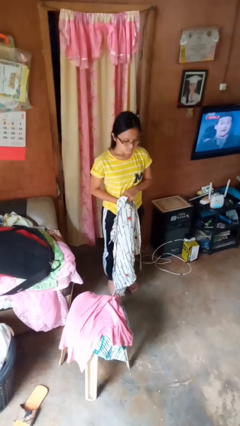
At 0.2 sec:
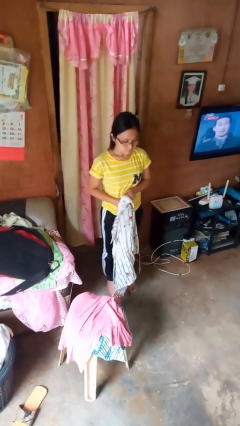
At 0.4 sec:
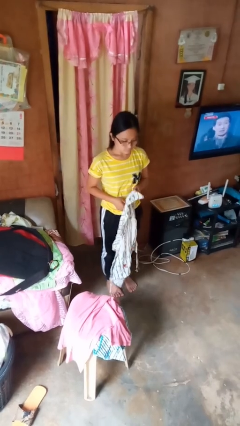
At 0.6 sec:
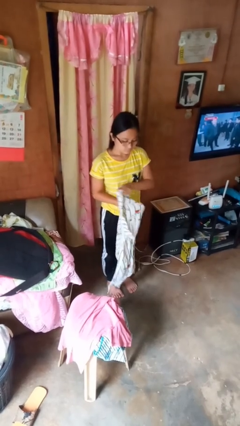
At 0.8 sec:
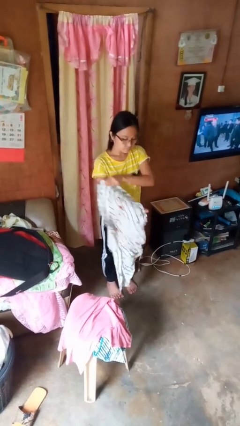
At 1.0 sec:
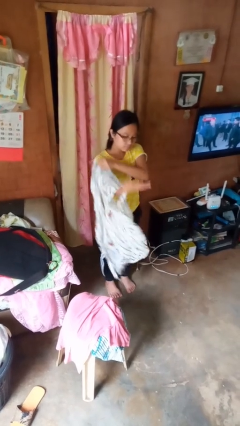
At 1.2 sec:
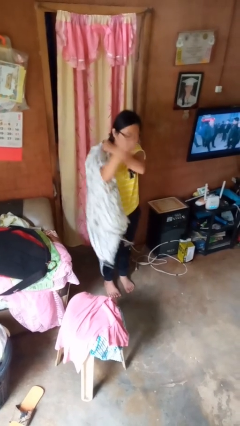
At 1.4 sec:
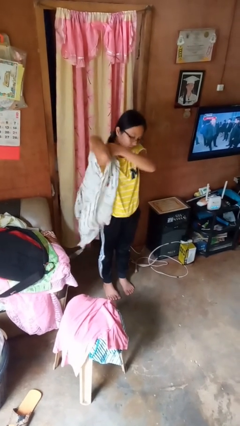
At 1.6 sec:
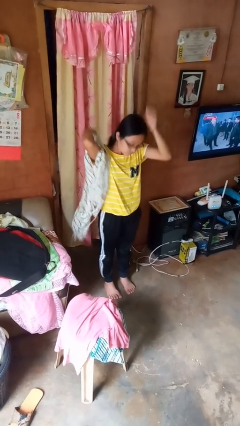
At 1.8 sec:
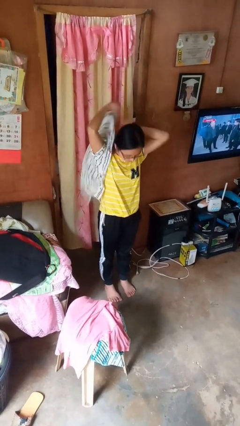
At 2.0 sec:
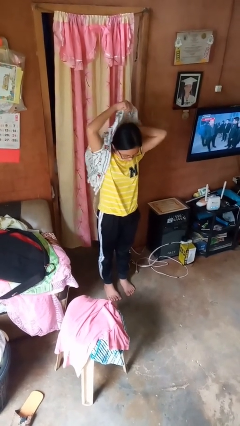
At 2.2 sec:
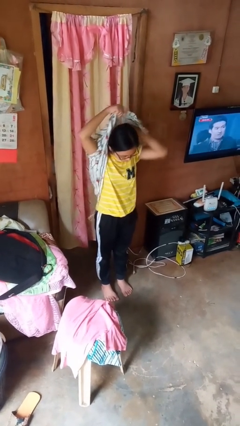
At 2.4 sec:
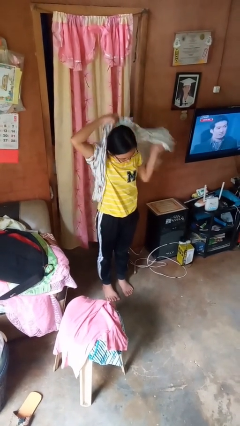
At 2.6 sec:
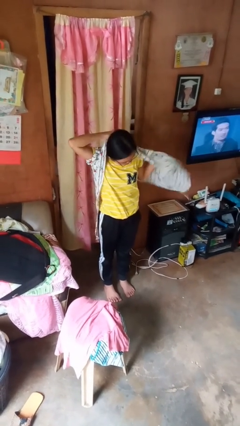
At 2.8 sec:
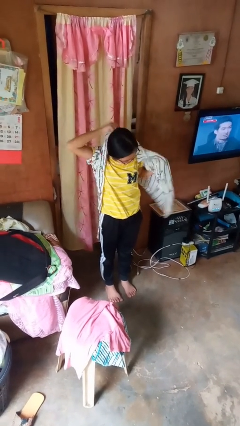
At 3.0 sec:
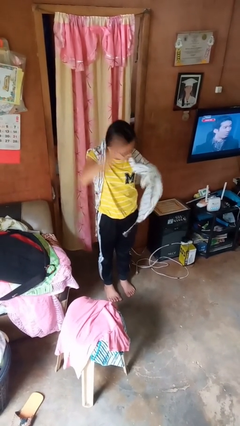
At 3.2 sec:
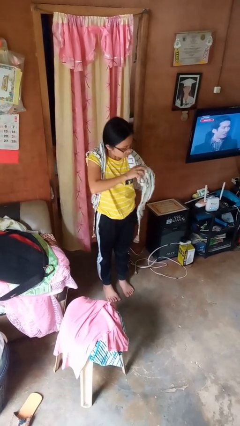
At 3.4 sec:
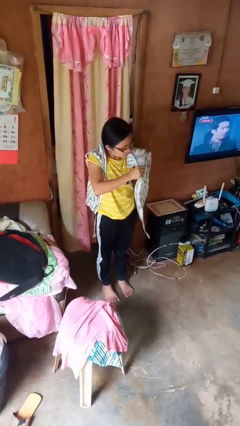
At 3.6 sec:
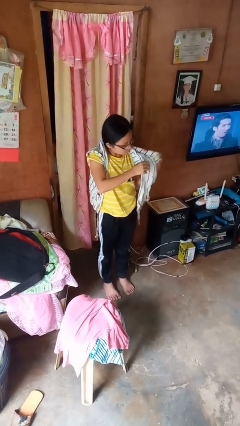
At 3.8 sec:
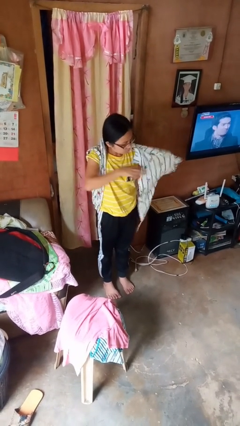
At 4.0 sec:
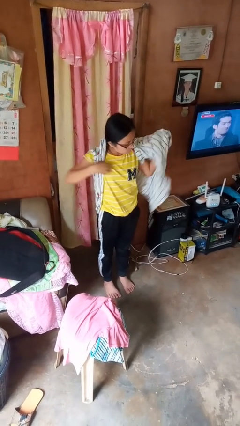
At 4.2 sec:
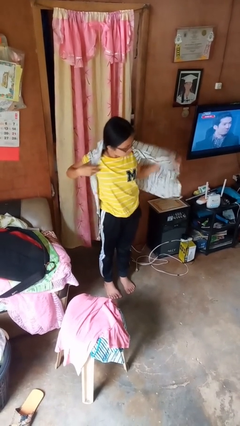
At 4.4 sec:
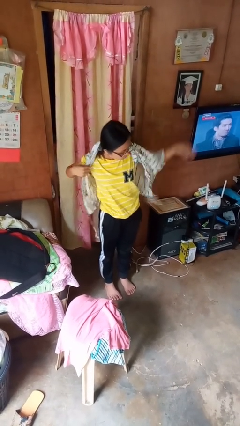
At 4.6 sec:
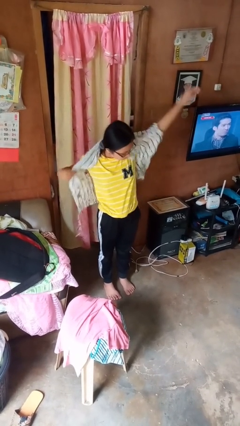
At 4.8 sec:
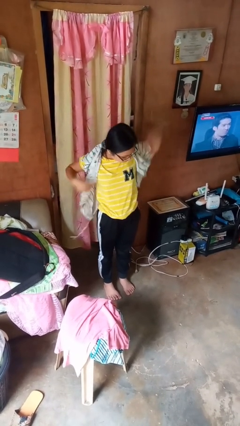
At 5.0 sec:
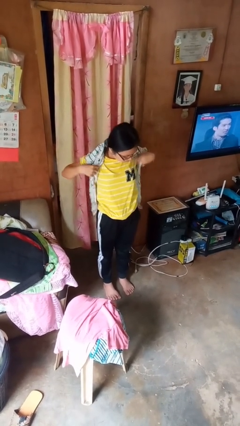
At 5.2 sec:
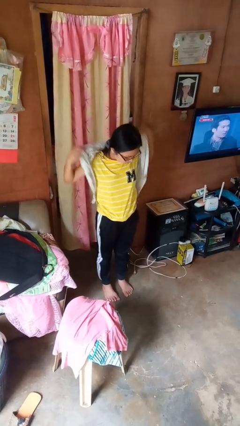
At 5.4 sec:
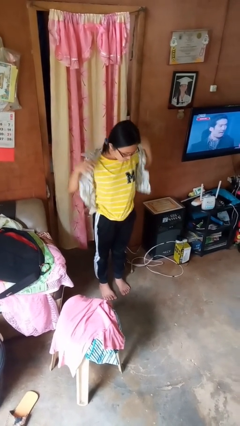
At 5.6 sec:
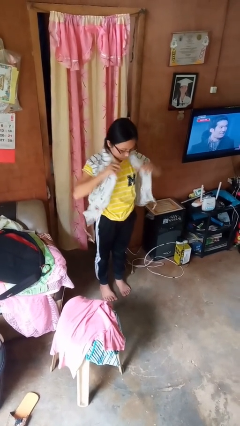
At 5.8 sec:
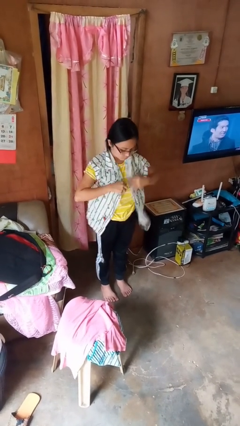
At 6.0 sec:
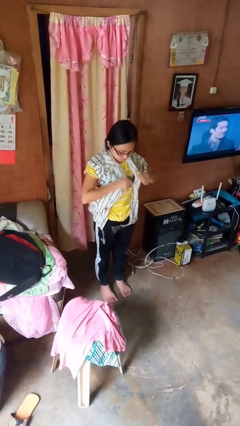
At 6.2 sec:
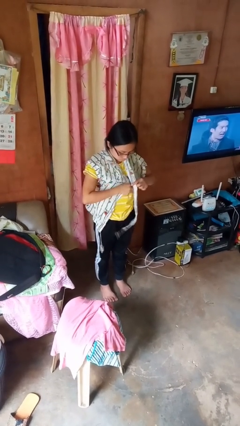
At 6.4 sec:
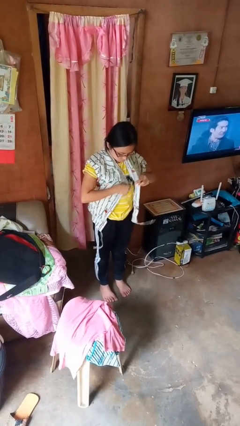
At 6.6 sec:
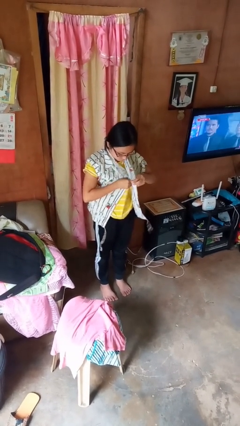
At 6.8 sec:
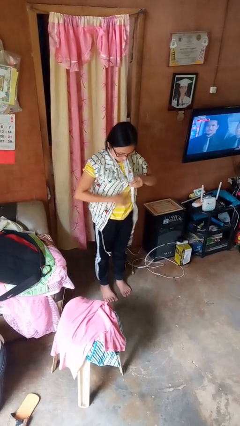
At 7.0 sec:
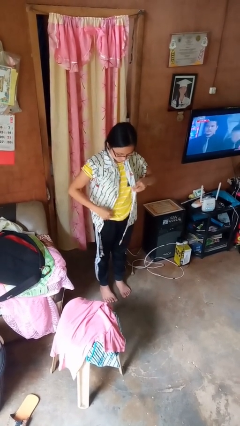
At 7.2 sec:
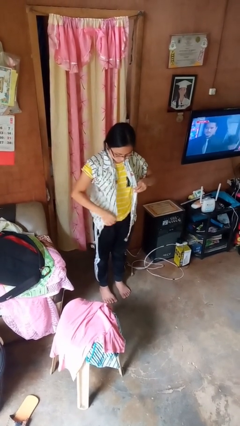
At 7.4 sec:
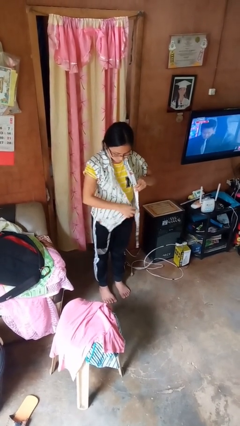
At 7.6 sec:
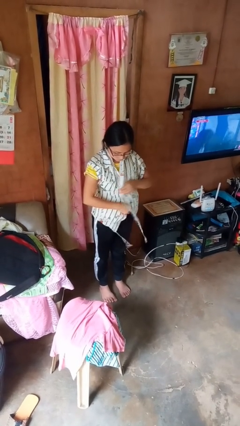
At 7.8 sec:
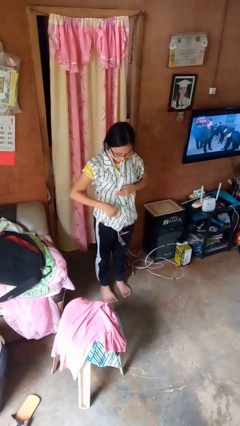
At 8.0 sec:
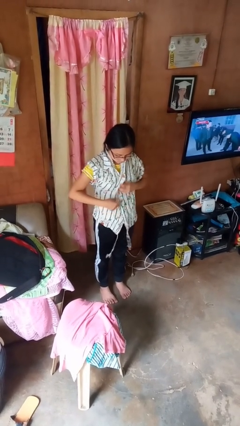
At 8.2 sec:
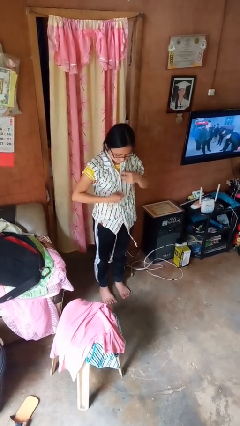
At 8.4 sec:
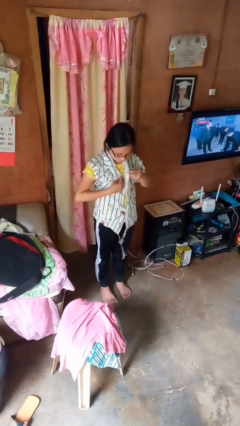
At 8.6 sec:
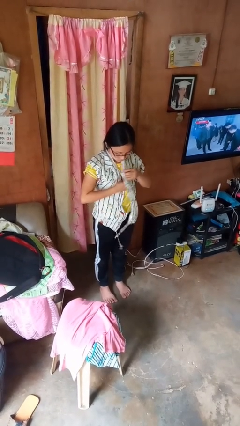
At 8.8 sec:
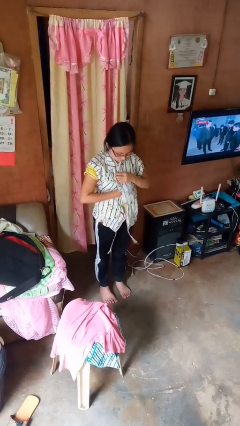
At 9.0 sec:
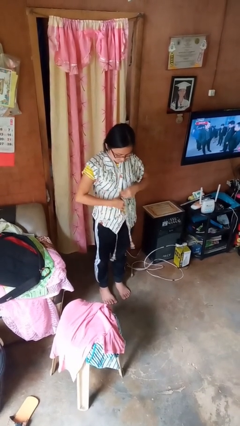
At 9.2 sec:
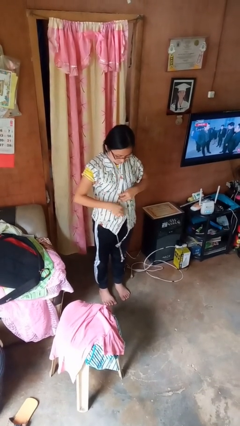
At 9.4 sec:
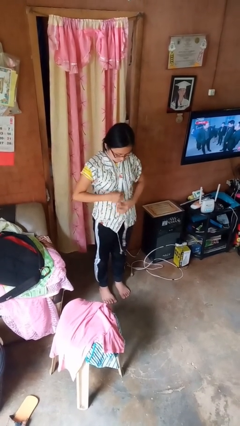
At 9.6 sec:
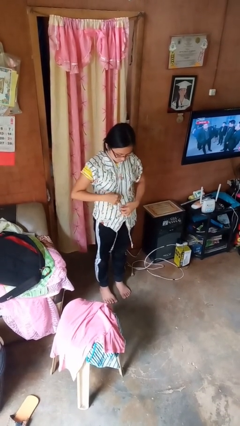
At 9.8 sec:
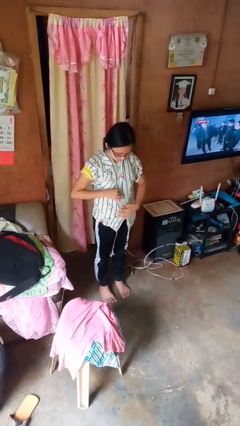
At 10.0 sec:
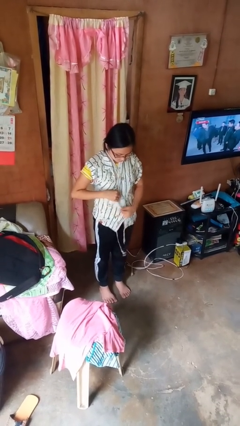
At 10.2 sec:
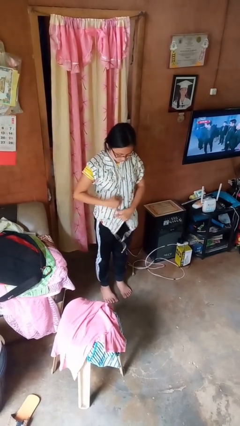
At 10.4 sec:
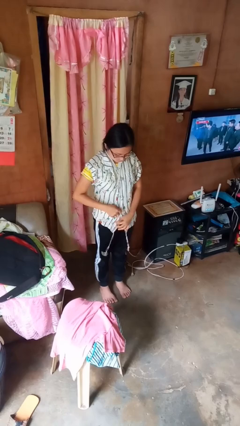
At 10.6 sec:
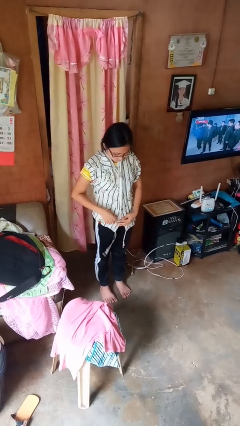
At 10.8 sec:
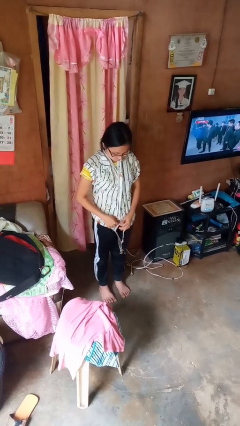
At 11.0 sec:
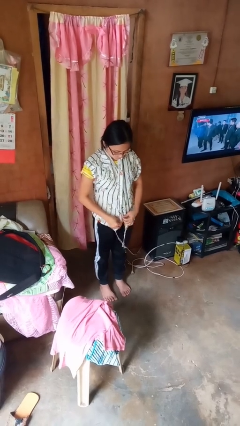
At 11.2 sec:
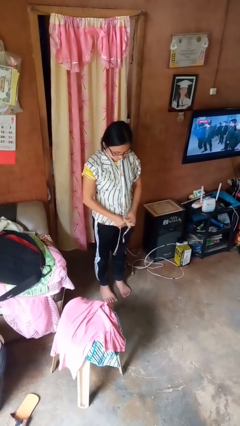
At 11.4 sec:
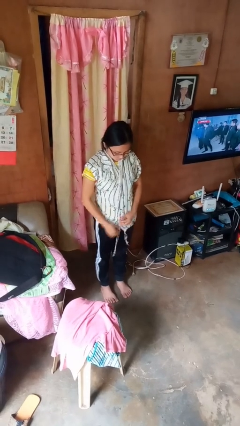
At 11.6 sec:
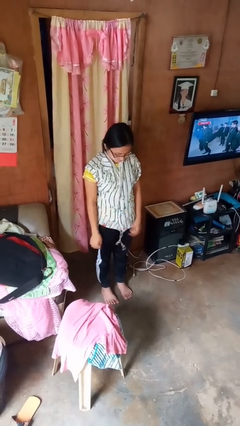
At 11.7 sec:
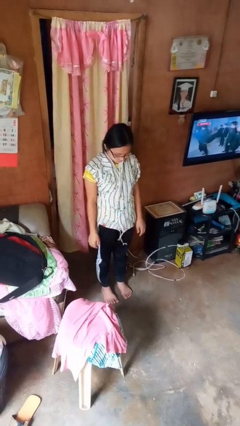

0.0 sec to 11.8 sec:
person puts on shirt

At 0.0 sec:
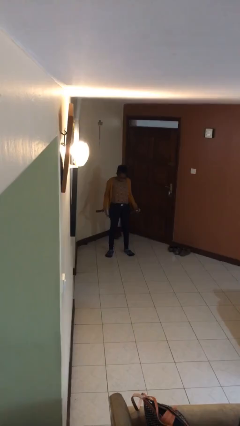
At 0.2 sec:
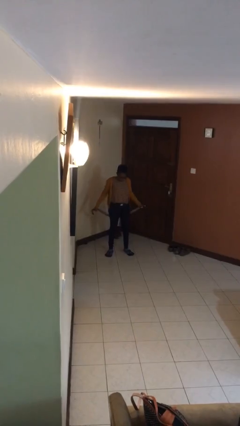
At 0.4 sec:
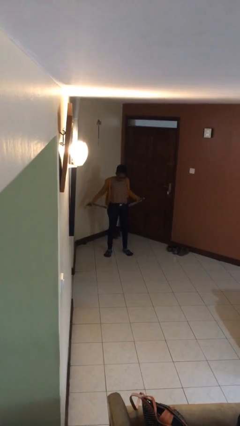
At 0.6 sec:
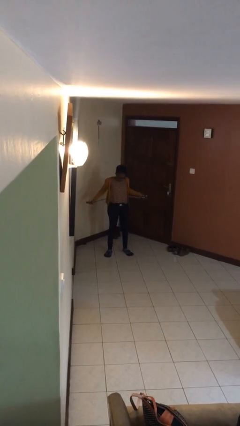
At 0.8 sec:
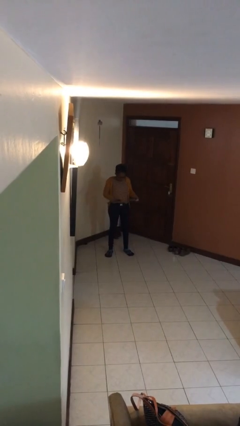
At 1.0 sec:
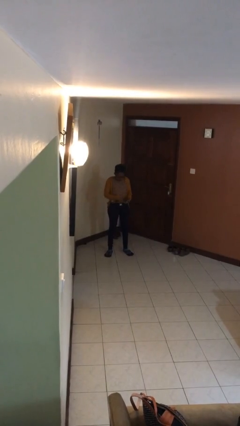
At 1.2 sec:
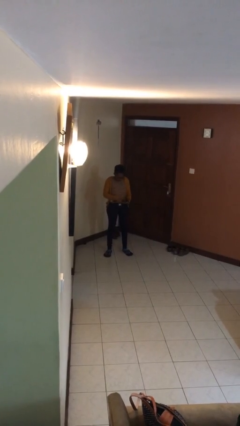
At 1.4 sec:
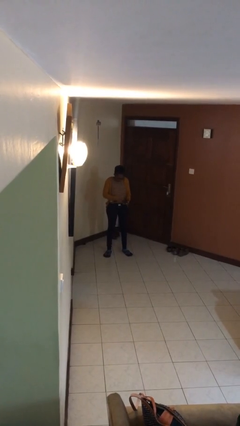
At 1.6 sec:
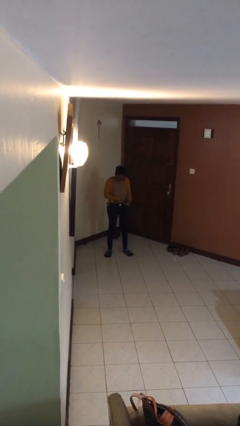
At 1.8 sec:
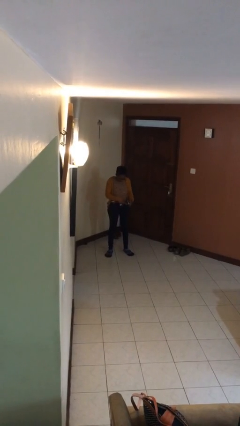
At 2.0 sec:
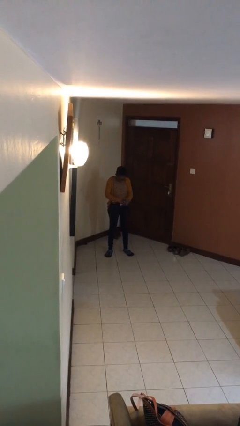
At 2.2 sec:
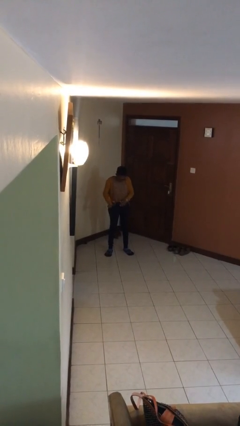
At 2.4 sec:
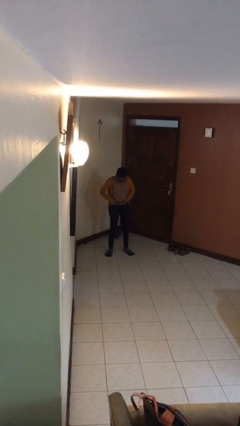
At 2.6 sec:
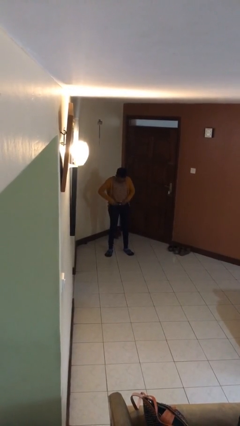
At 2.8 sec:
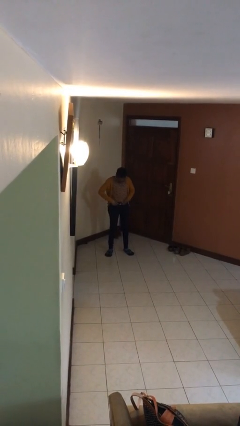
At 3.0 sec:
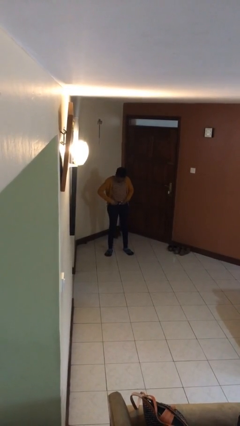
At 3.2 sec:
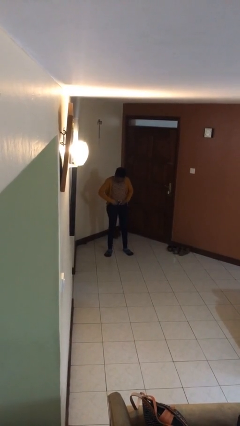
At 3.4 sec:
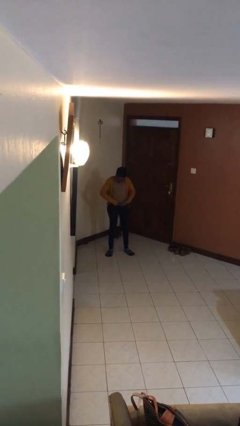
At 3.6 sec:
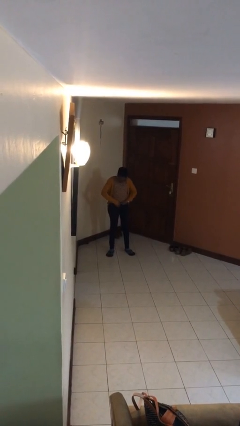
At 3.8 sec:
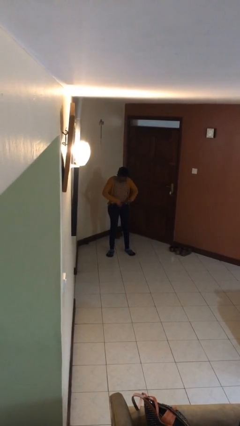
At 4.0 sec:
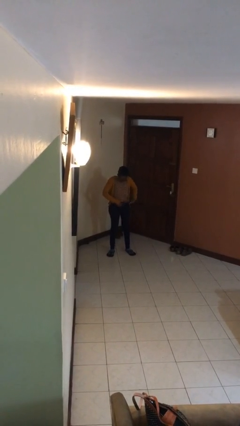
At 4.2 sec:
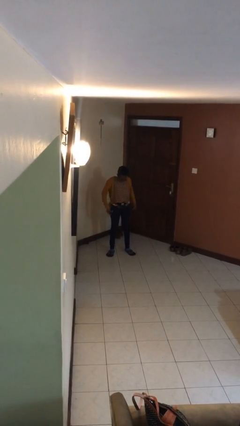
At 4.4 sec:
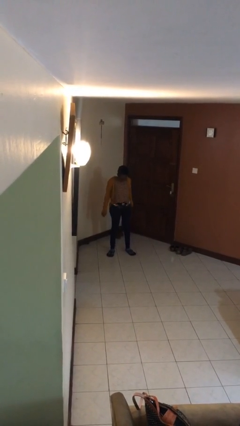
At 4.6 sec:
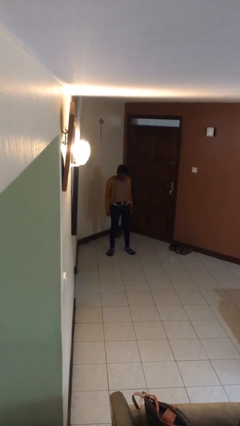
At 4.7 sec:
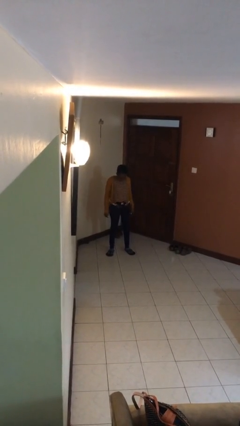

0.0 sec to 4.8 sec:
person puts on belt
